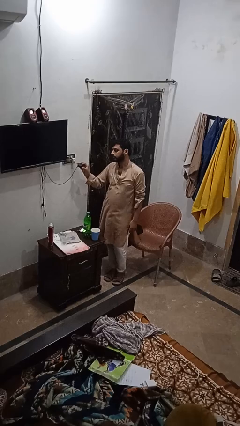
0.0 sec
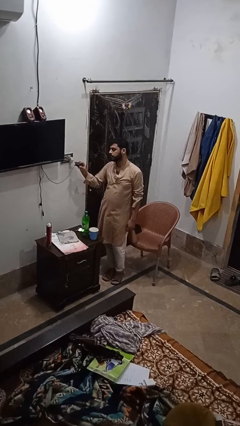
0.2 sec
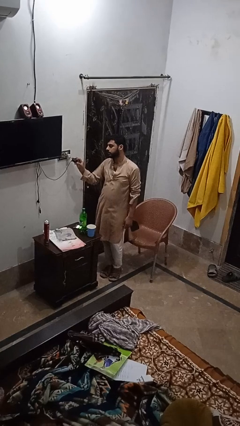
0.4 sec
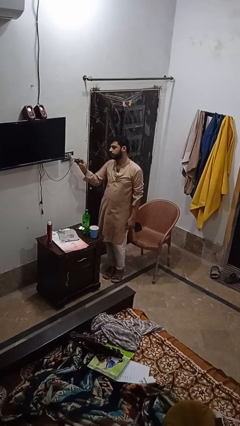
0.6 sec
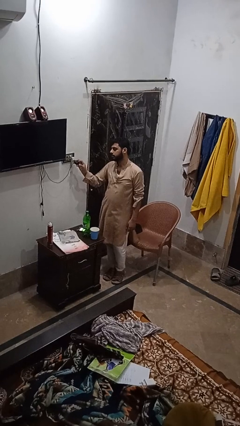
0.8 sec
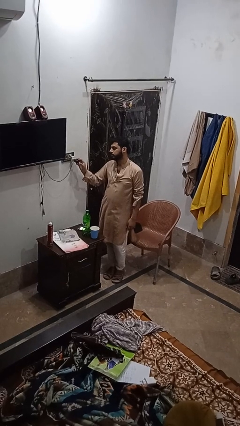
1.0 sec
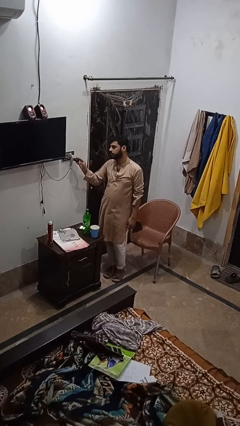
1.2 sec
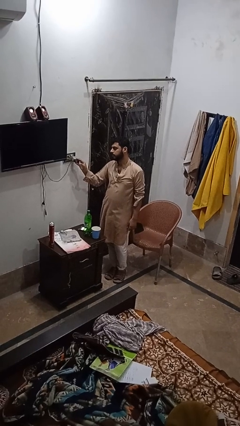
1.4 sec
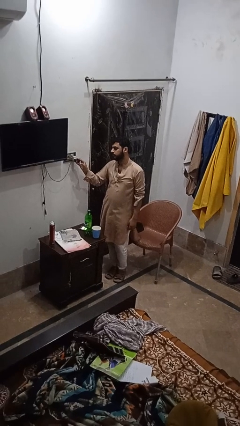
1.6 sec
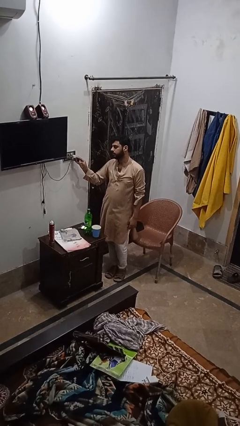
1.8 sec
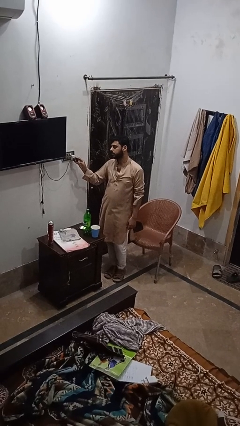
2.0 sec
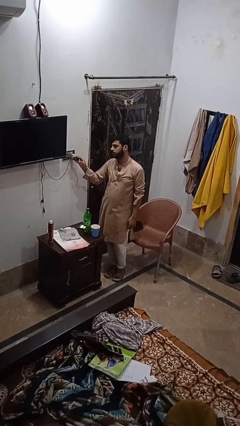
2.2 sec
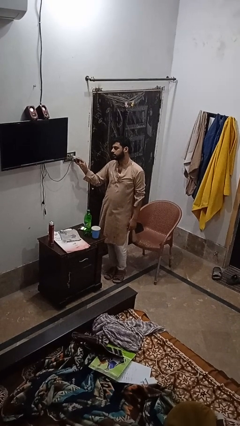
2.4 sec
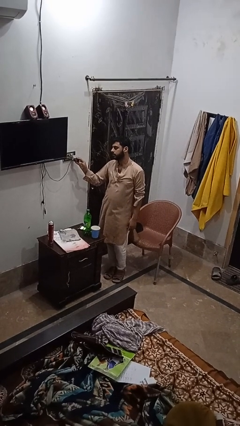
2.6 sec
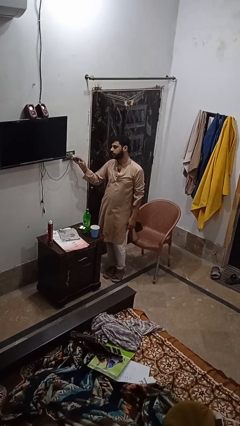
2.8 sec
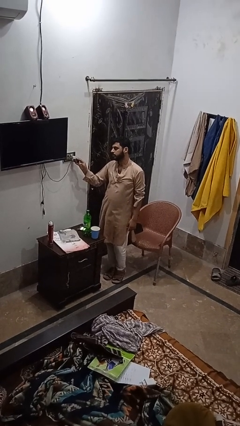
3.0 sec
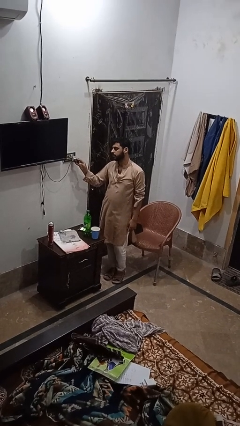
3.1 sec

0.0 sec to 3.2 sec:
person plugs into electrical socket

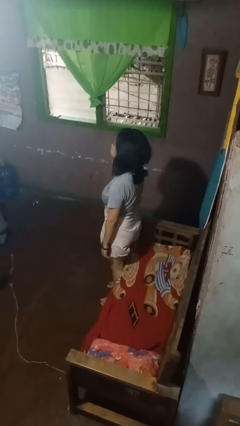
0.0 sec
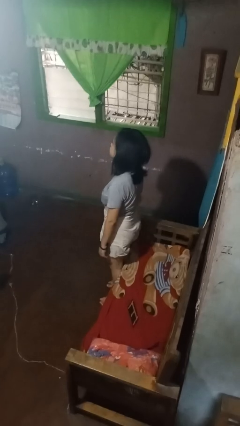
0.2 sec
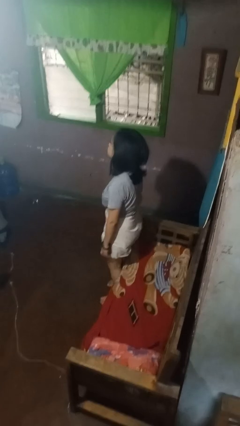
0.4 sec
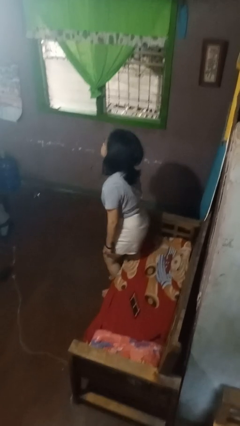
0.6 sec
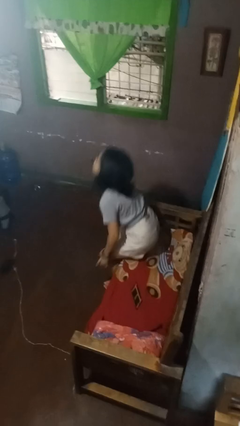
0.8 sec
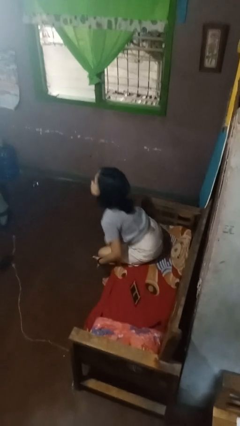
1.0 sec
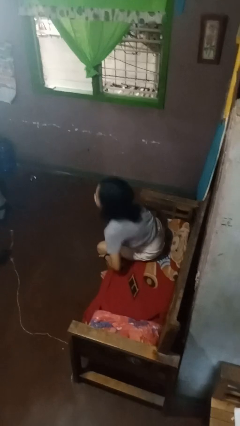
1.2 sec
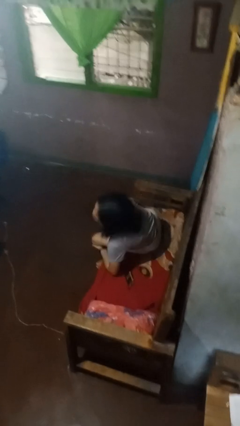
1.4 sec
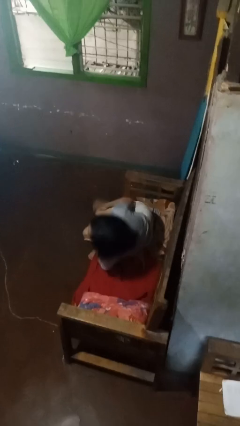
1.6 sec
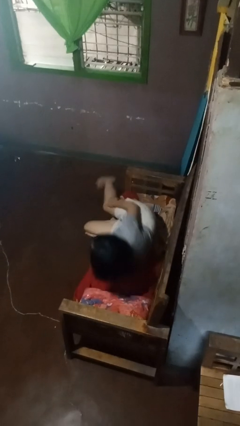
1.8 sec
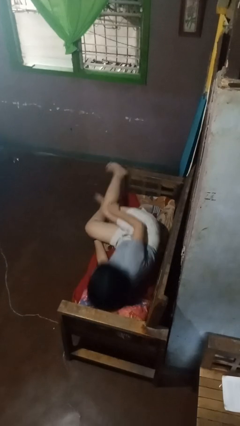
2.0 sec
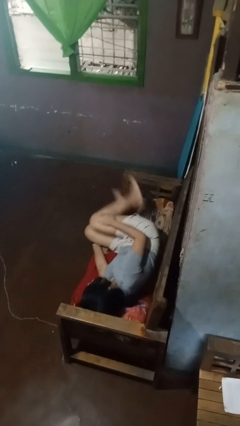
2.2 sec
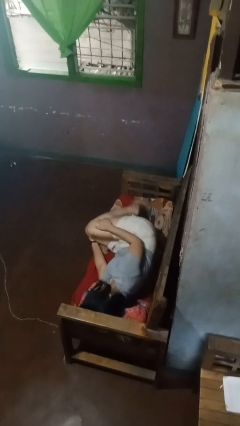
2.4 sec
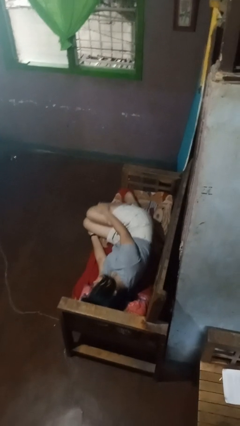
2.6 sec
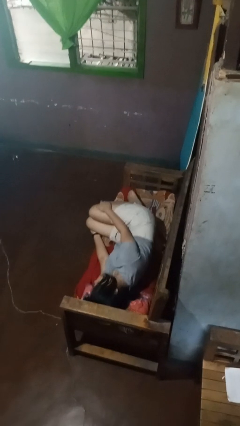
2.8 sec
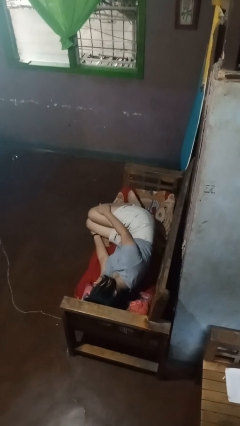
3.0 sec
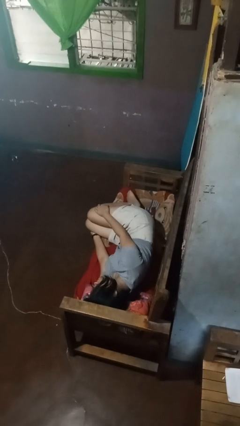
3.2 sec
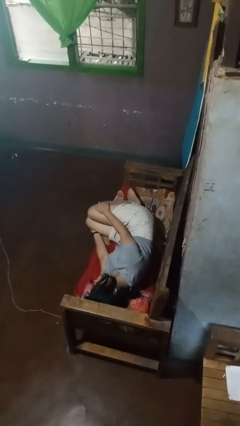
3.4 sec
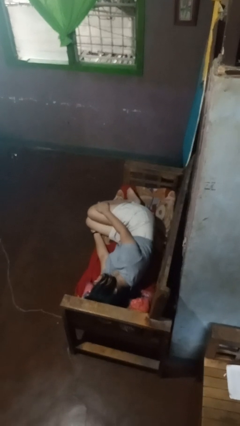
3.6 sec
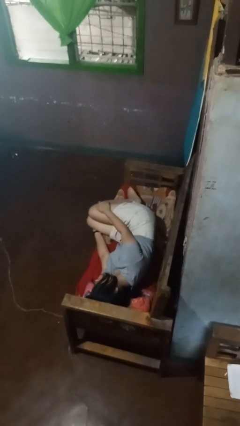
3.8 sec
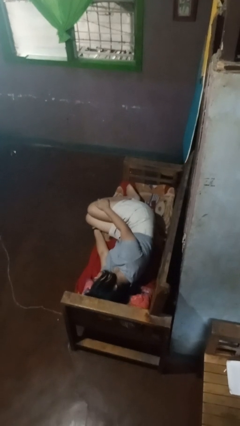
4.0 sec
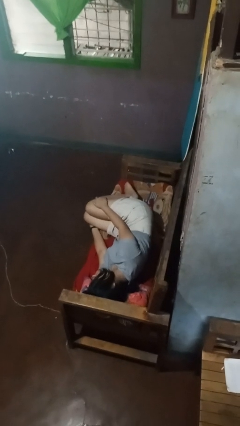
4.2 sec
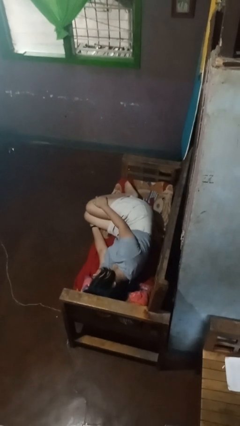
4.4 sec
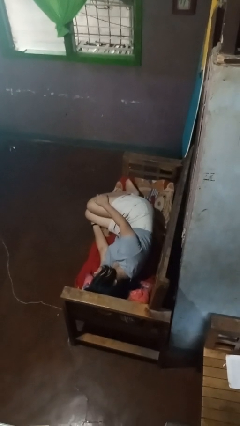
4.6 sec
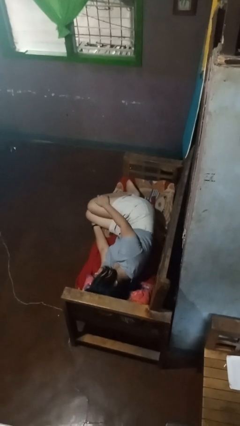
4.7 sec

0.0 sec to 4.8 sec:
person lies down on bed

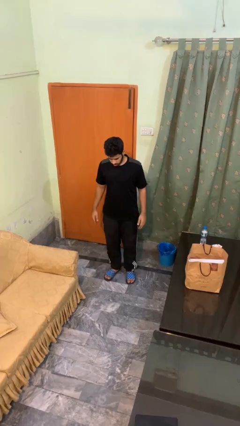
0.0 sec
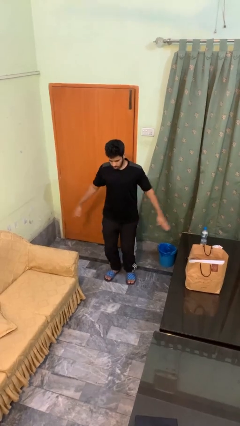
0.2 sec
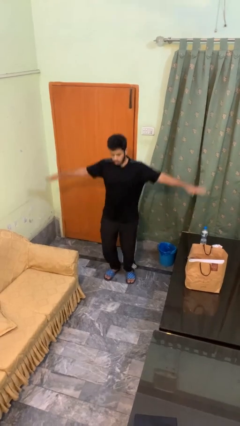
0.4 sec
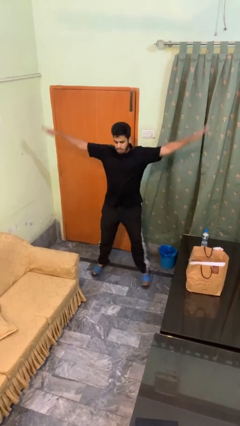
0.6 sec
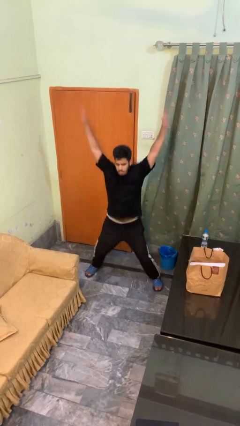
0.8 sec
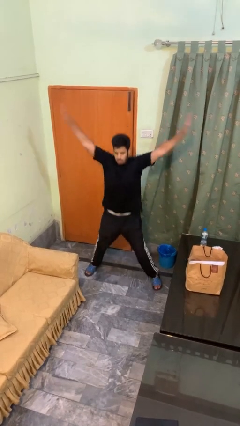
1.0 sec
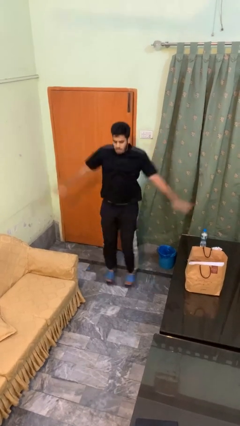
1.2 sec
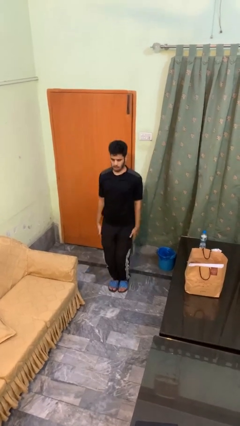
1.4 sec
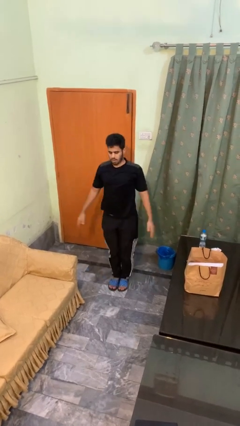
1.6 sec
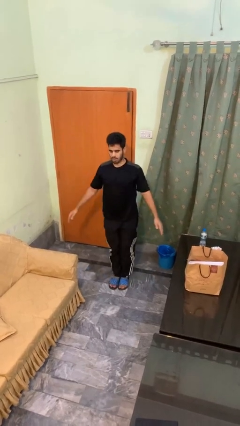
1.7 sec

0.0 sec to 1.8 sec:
person exercises with jumping jacks

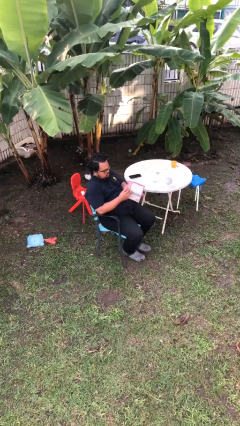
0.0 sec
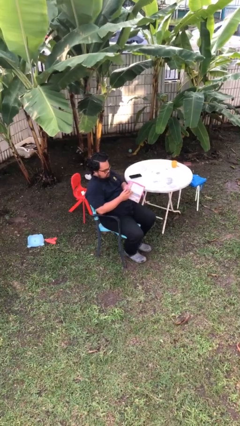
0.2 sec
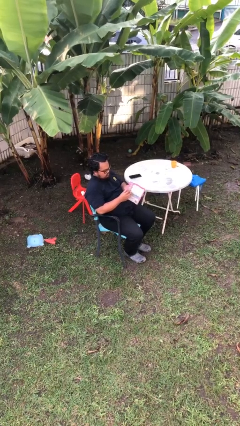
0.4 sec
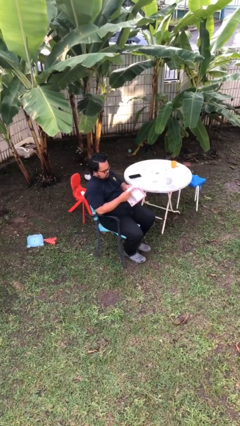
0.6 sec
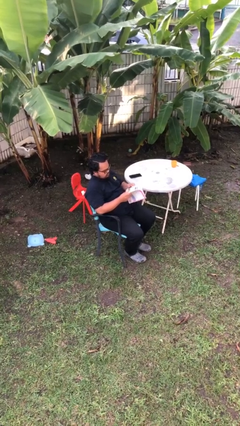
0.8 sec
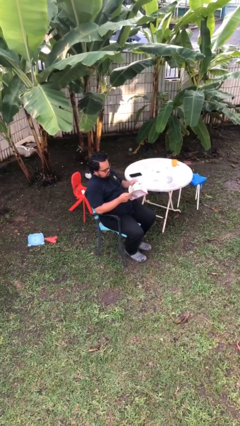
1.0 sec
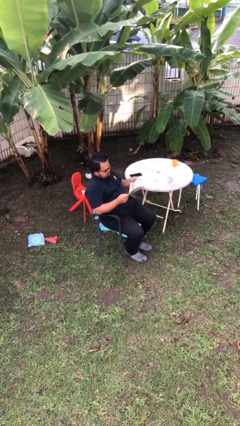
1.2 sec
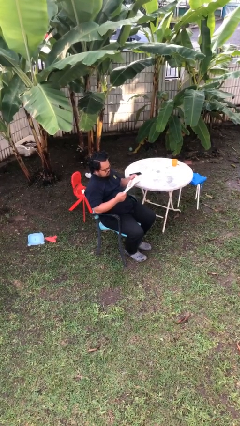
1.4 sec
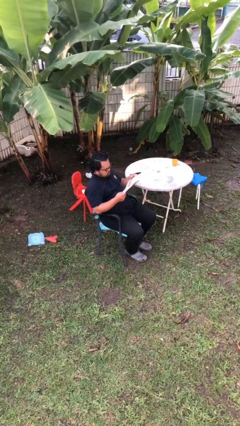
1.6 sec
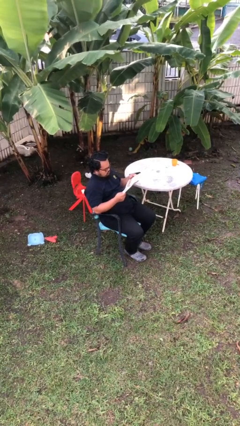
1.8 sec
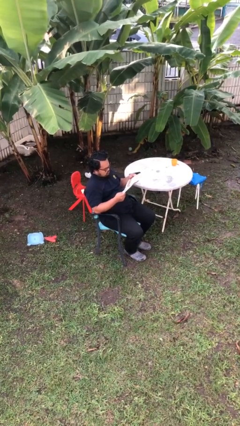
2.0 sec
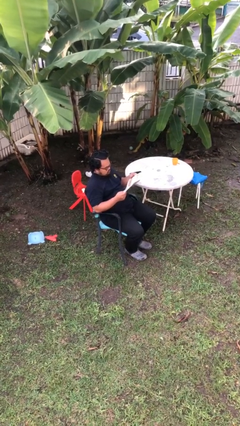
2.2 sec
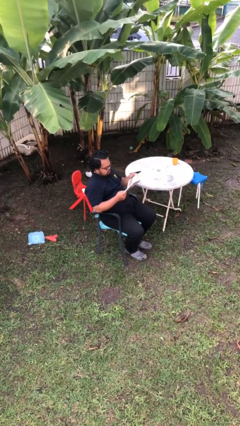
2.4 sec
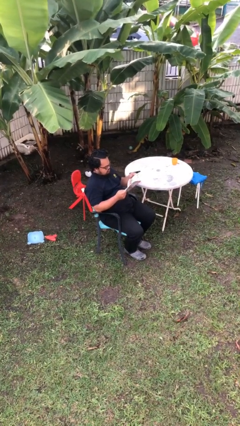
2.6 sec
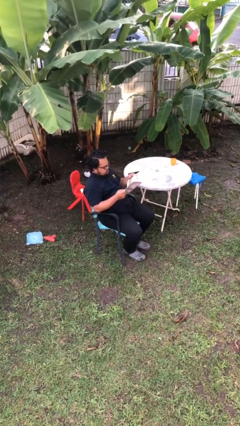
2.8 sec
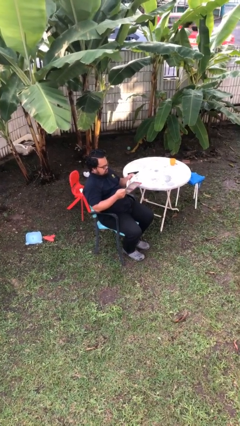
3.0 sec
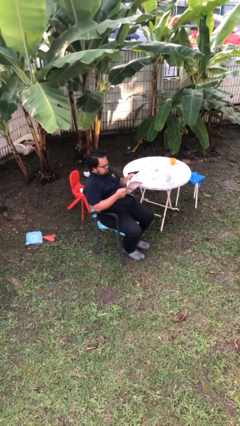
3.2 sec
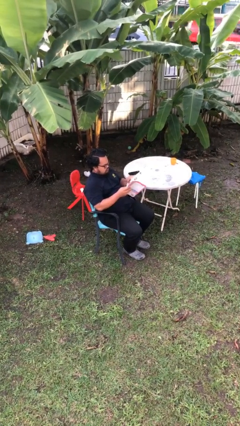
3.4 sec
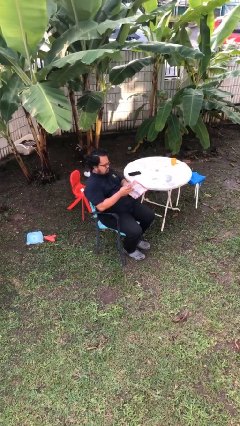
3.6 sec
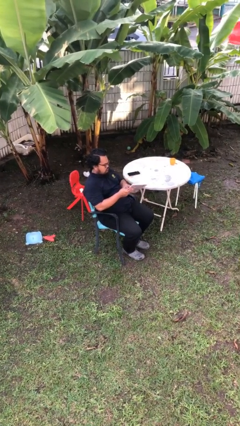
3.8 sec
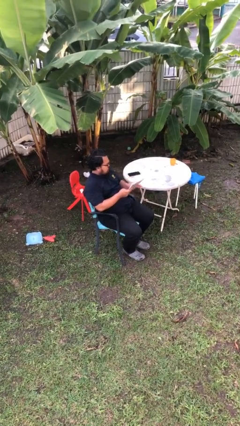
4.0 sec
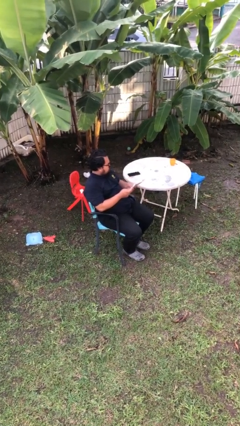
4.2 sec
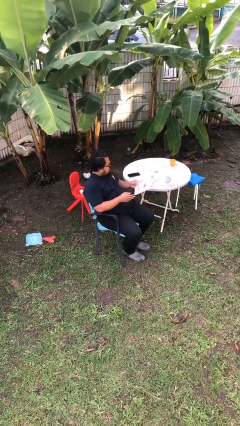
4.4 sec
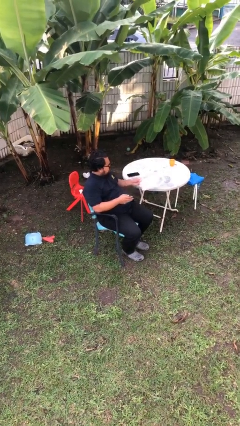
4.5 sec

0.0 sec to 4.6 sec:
person reads document

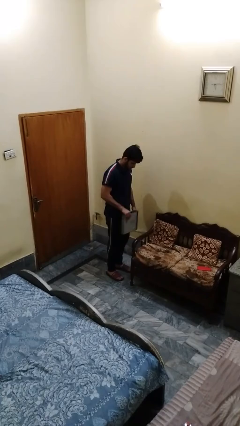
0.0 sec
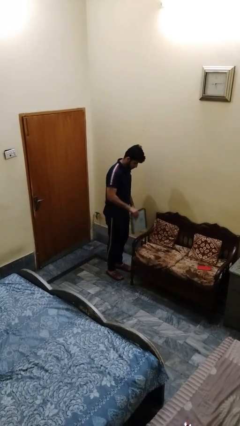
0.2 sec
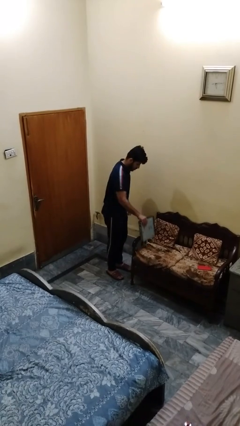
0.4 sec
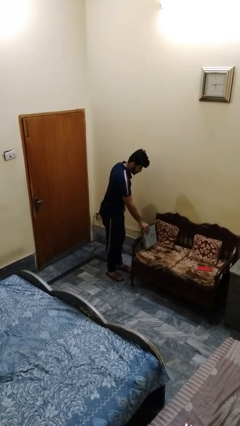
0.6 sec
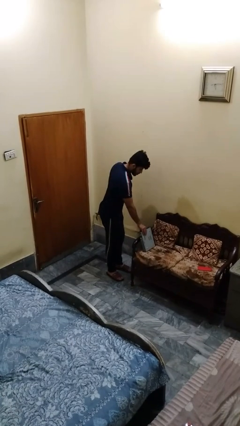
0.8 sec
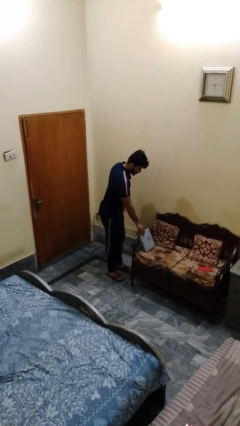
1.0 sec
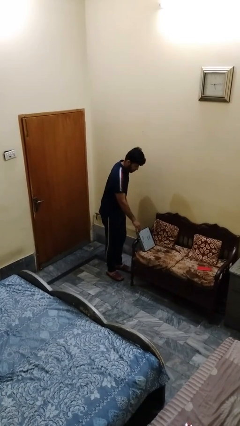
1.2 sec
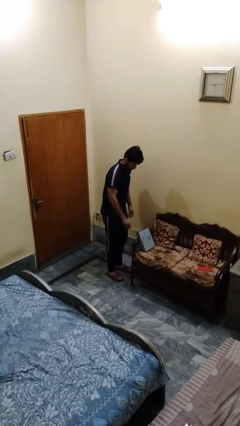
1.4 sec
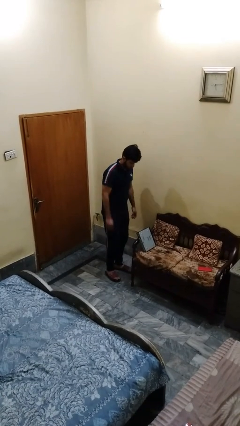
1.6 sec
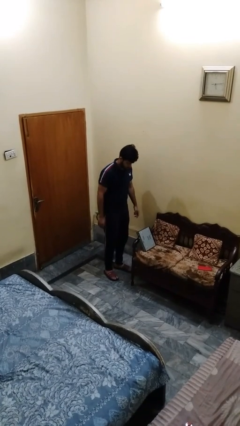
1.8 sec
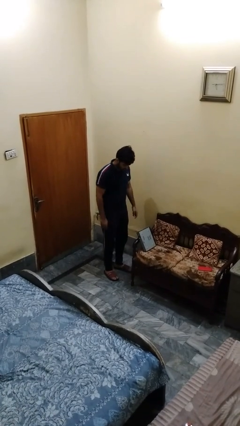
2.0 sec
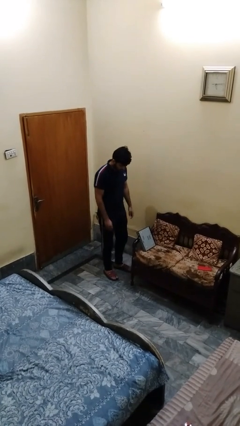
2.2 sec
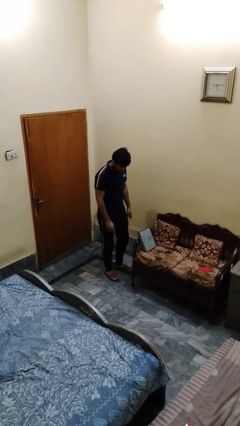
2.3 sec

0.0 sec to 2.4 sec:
person puts down object on couch

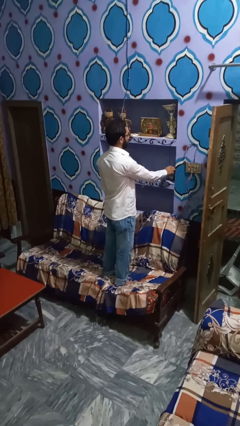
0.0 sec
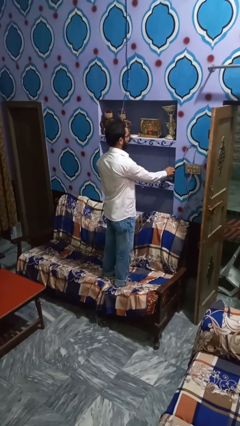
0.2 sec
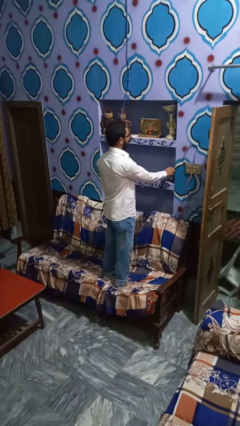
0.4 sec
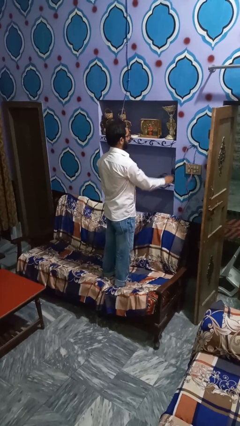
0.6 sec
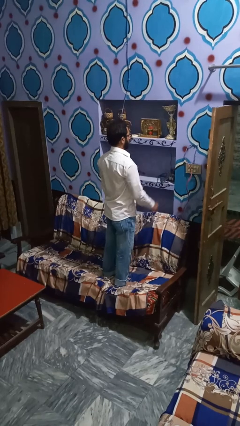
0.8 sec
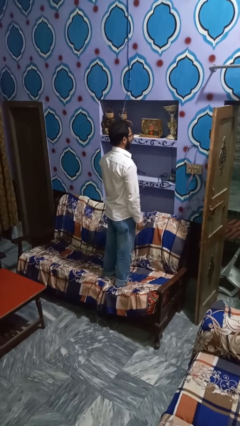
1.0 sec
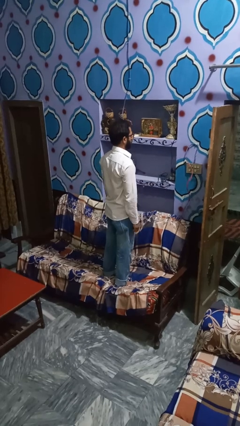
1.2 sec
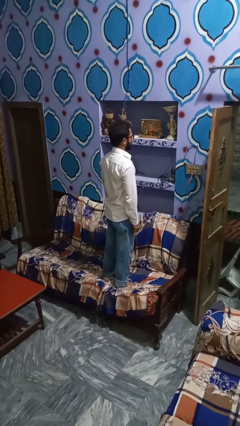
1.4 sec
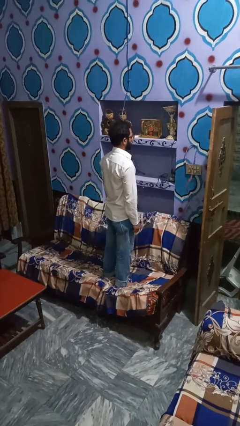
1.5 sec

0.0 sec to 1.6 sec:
person turns off lamp
